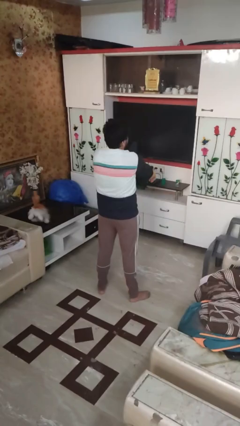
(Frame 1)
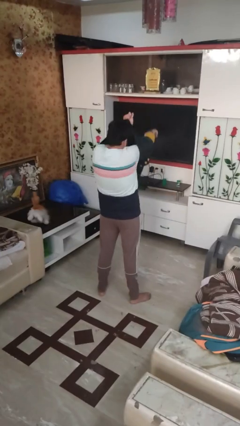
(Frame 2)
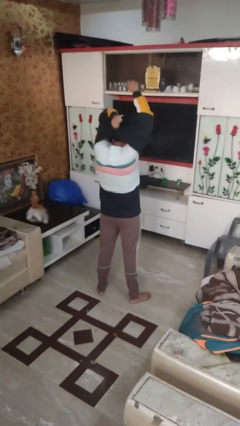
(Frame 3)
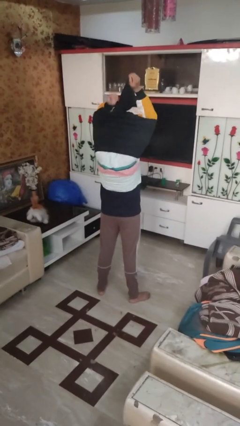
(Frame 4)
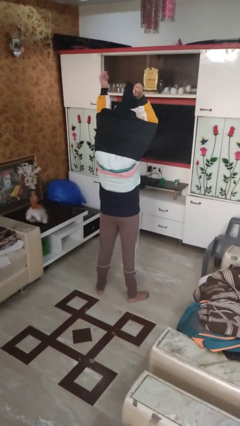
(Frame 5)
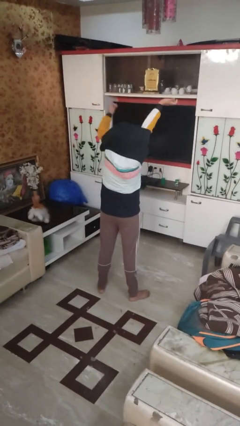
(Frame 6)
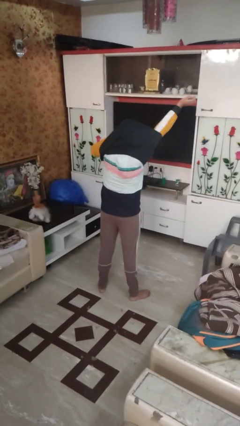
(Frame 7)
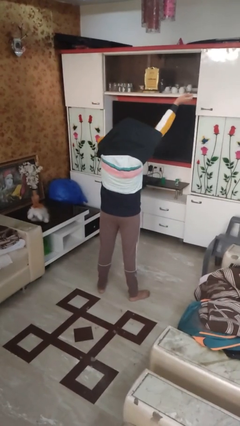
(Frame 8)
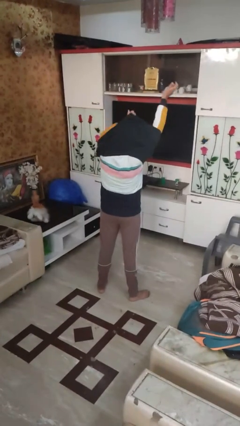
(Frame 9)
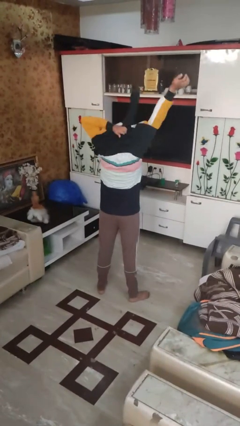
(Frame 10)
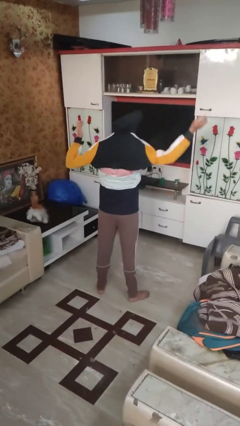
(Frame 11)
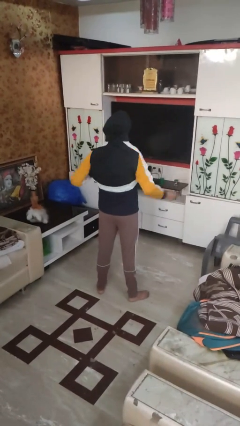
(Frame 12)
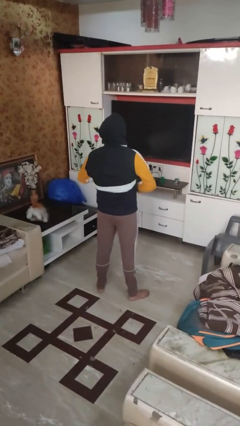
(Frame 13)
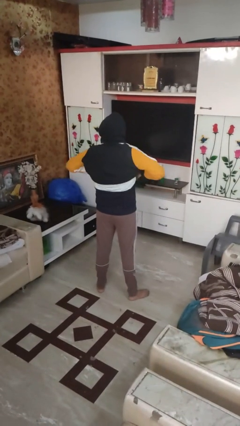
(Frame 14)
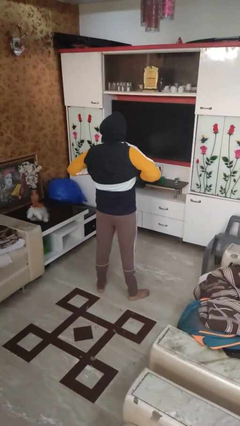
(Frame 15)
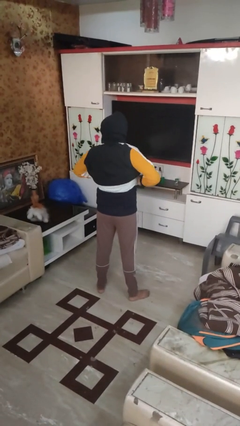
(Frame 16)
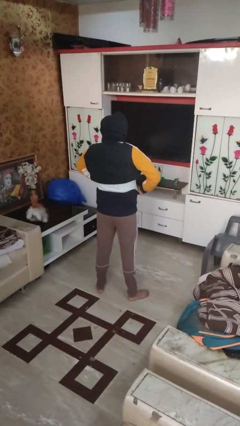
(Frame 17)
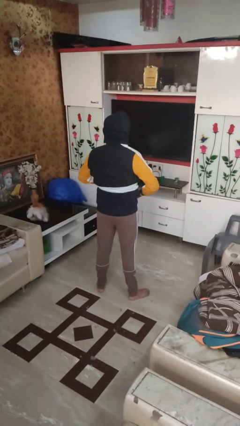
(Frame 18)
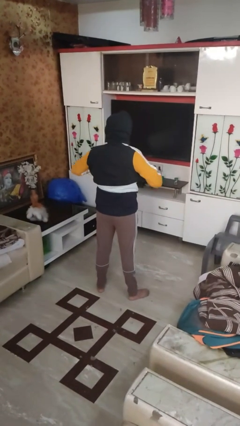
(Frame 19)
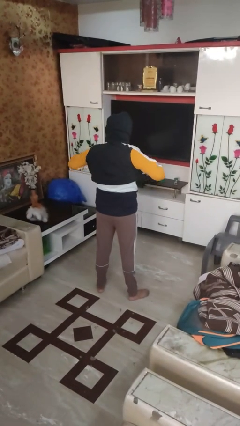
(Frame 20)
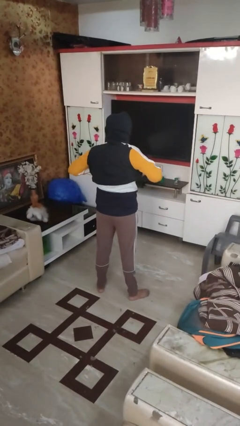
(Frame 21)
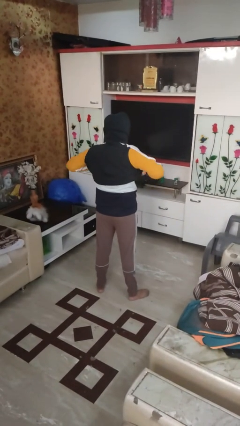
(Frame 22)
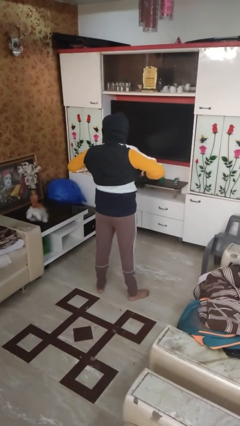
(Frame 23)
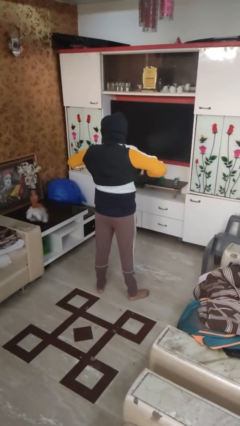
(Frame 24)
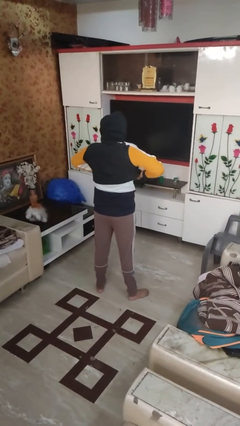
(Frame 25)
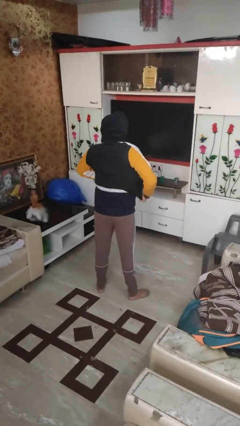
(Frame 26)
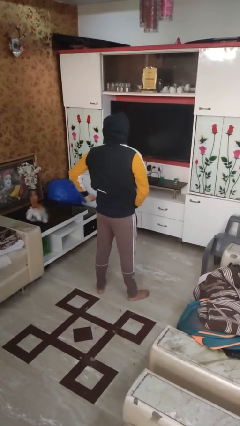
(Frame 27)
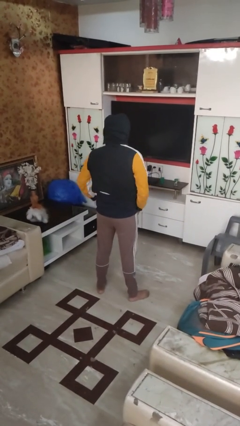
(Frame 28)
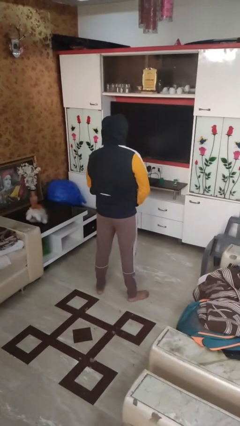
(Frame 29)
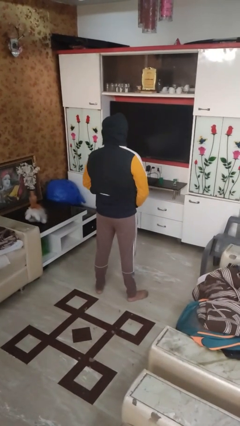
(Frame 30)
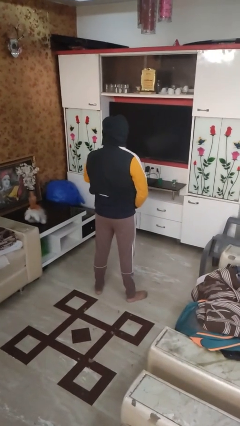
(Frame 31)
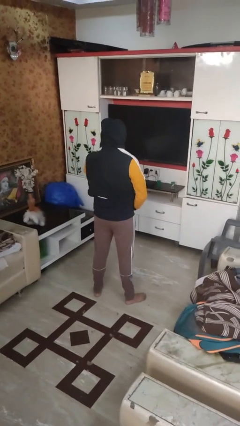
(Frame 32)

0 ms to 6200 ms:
person puts on hoodie

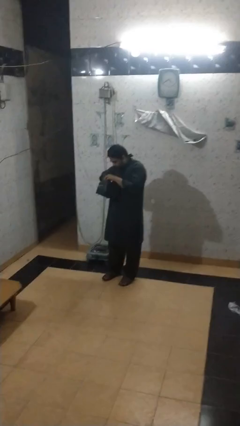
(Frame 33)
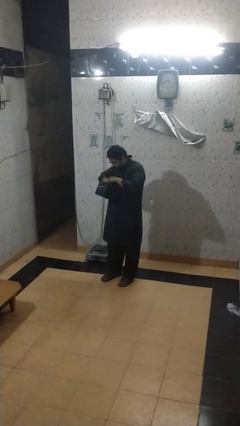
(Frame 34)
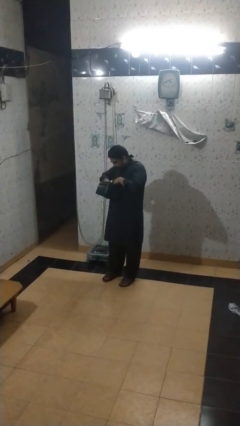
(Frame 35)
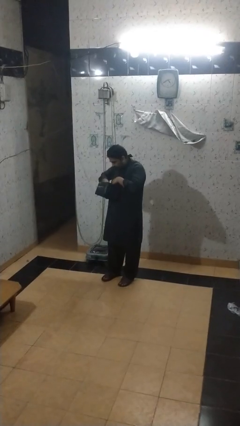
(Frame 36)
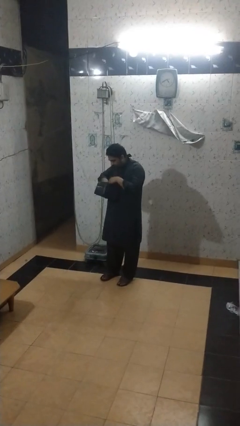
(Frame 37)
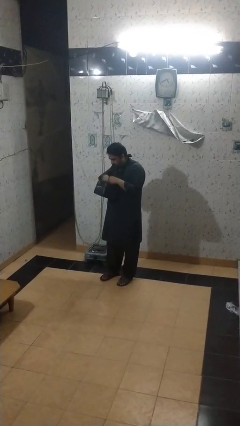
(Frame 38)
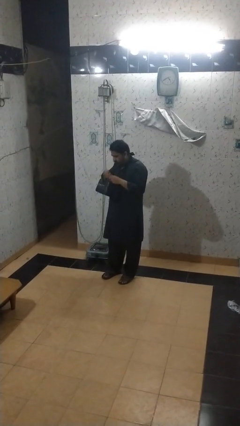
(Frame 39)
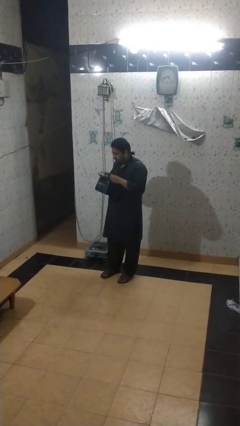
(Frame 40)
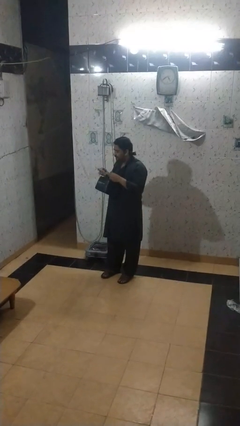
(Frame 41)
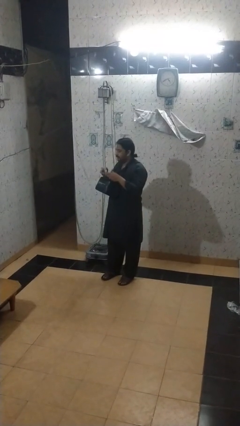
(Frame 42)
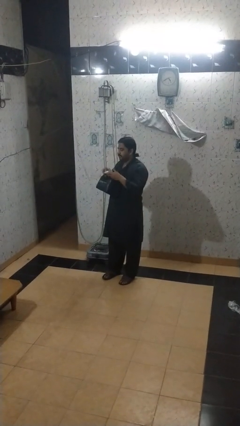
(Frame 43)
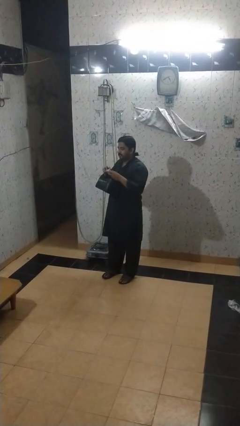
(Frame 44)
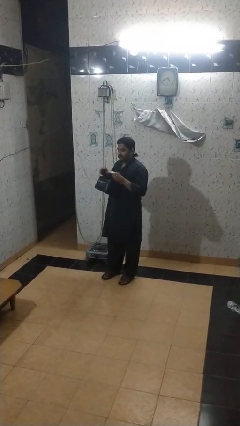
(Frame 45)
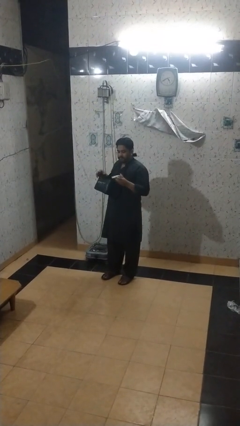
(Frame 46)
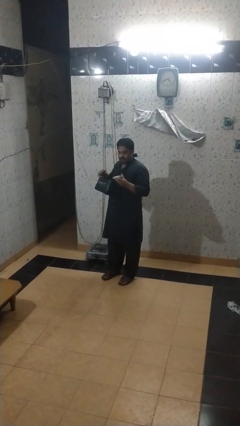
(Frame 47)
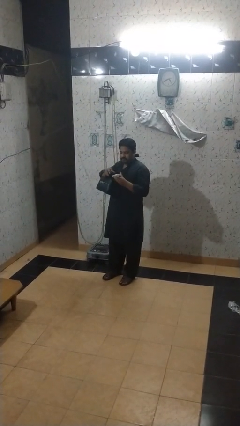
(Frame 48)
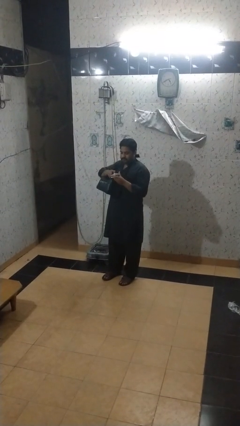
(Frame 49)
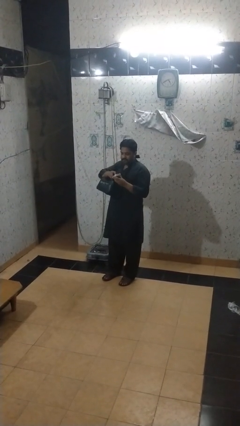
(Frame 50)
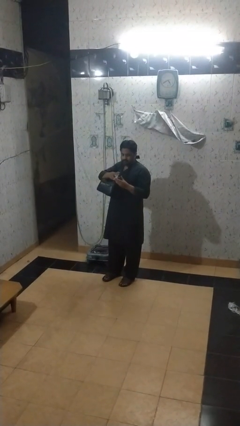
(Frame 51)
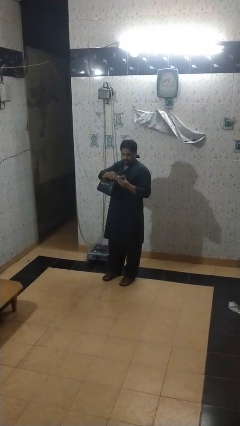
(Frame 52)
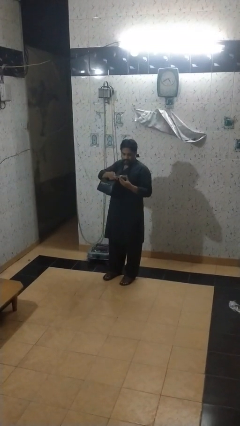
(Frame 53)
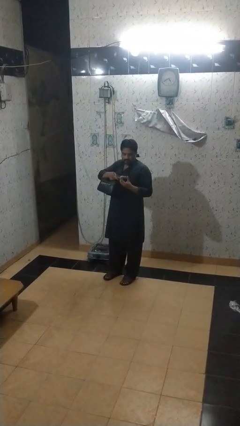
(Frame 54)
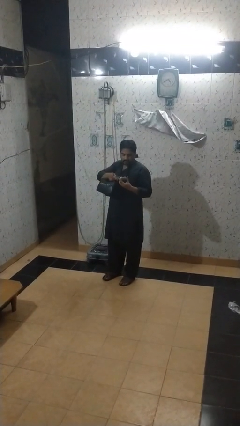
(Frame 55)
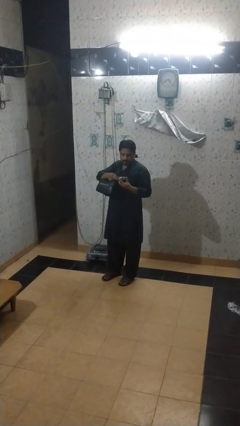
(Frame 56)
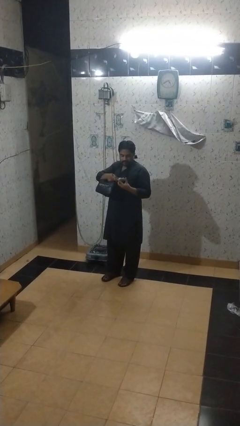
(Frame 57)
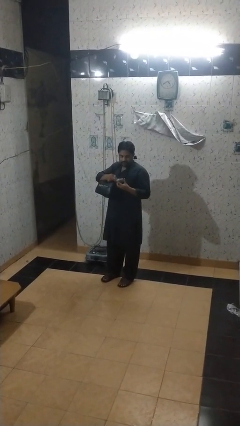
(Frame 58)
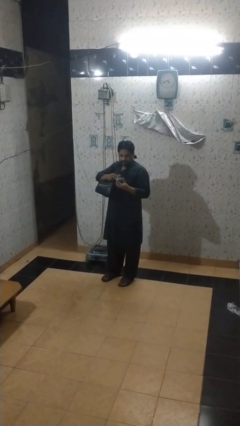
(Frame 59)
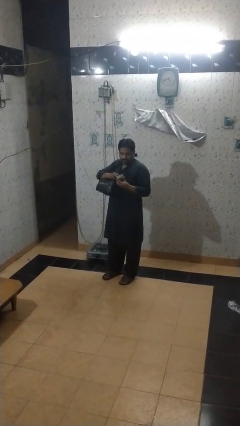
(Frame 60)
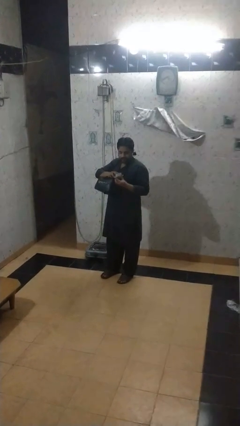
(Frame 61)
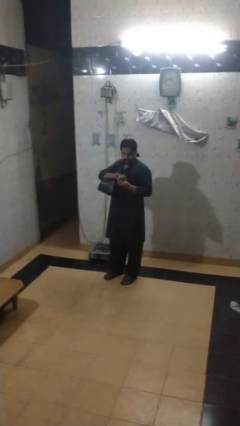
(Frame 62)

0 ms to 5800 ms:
person takes object from backpack

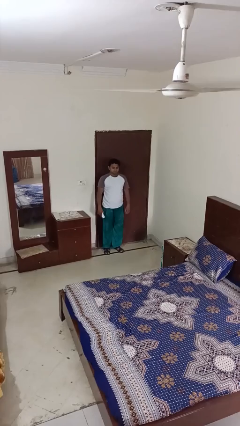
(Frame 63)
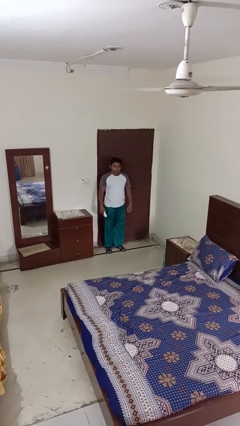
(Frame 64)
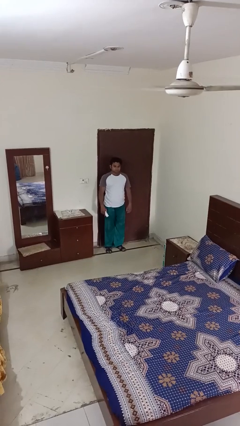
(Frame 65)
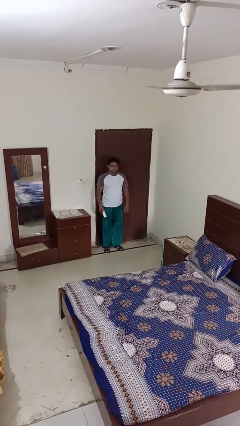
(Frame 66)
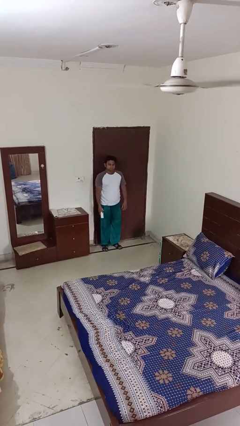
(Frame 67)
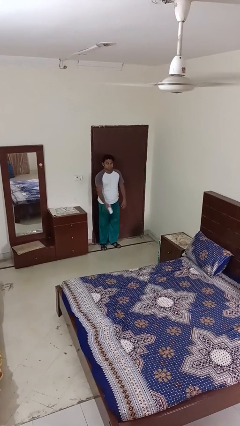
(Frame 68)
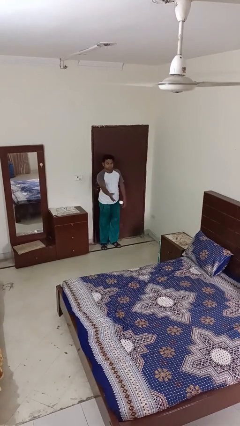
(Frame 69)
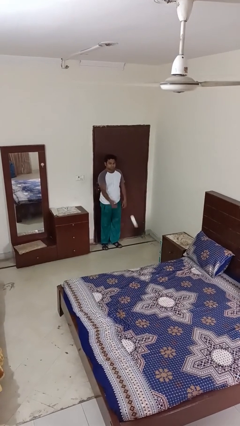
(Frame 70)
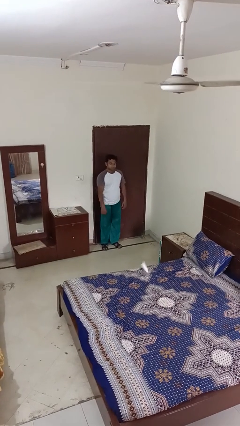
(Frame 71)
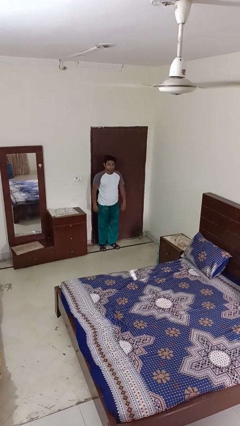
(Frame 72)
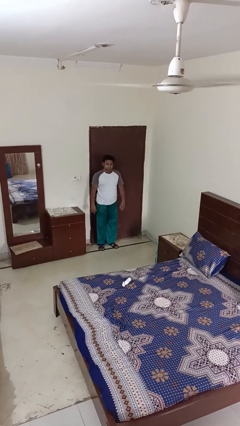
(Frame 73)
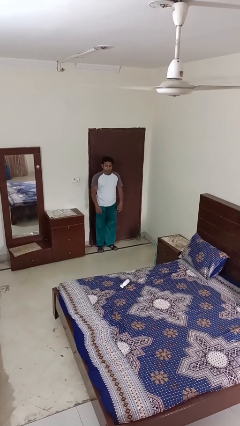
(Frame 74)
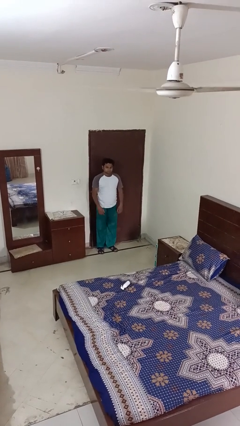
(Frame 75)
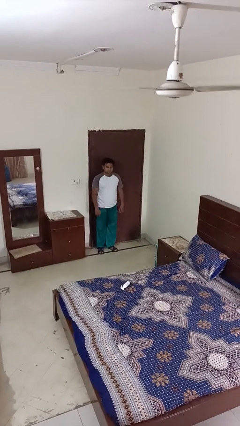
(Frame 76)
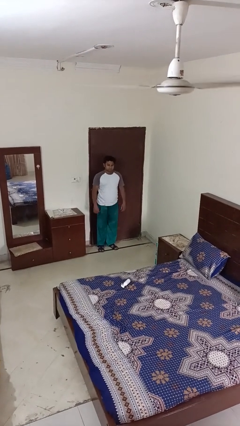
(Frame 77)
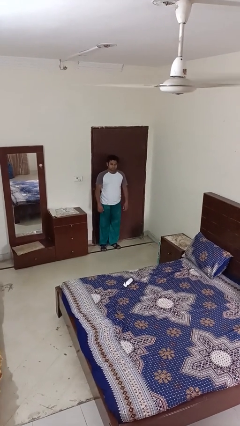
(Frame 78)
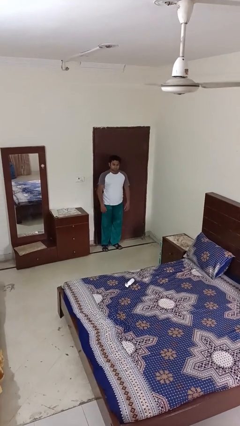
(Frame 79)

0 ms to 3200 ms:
person throws object on bed

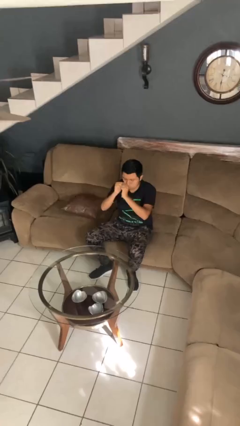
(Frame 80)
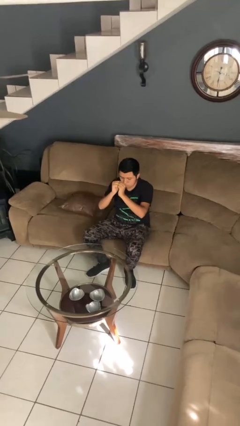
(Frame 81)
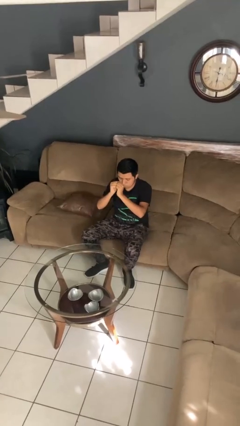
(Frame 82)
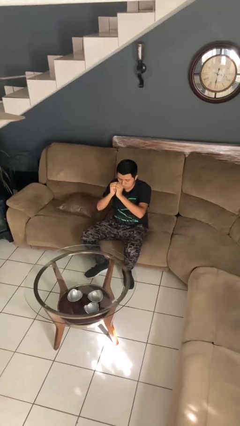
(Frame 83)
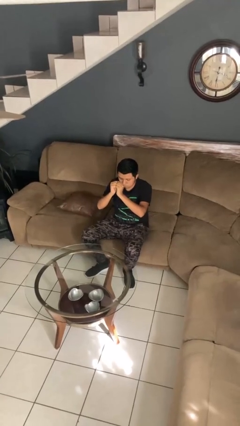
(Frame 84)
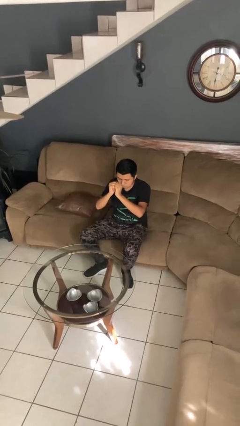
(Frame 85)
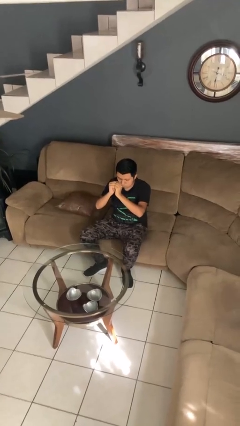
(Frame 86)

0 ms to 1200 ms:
person gestures zoom out

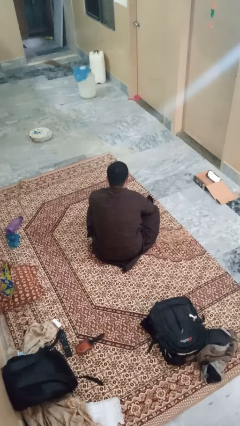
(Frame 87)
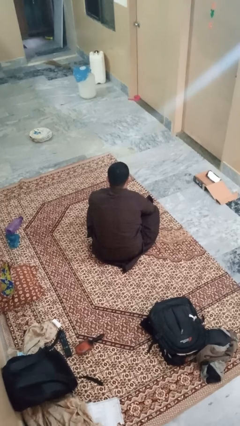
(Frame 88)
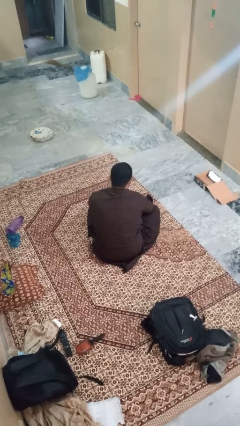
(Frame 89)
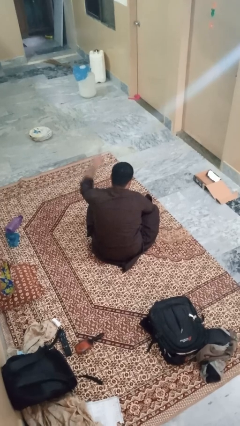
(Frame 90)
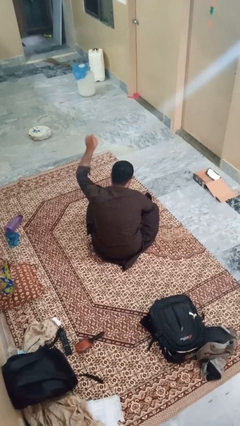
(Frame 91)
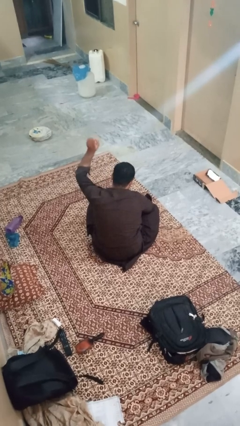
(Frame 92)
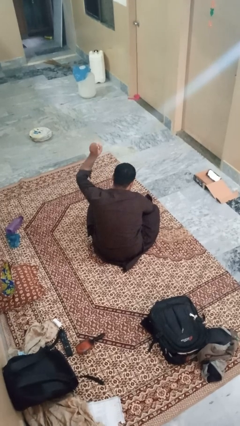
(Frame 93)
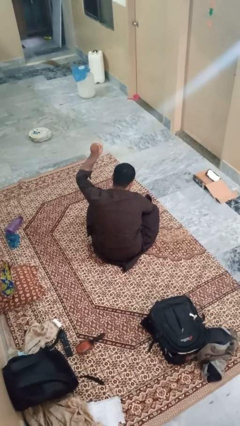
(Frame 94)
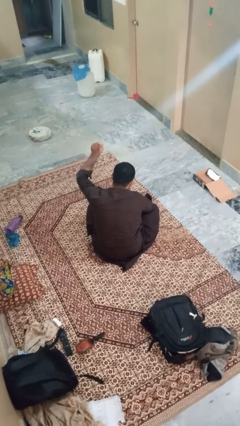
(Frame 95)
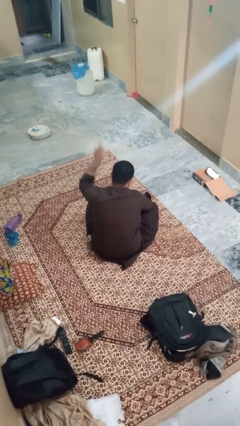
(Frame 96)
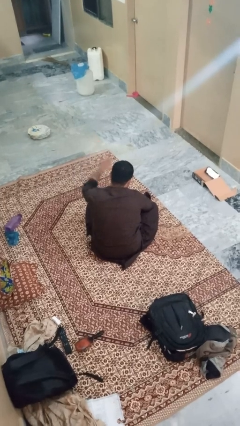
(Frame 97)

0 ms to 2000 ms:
person gestures number one
